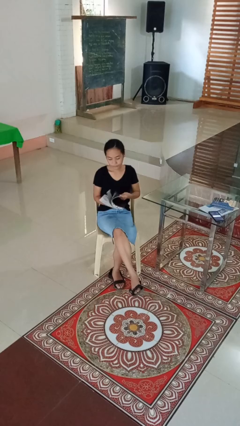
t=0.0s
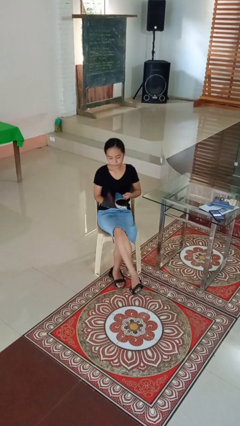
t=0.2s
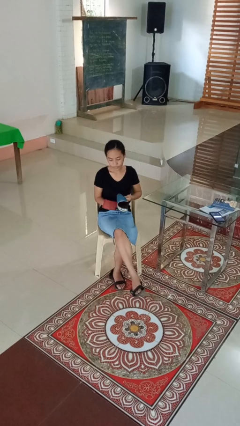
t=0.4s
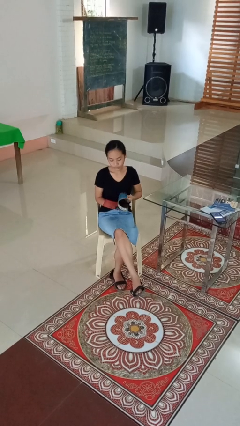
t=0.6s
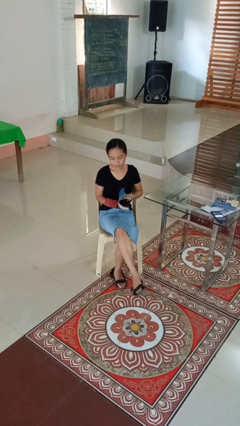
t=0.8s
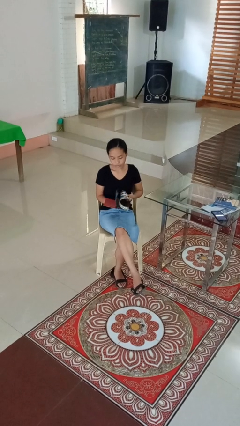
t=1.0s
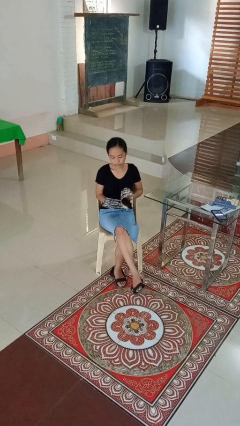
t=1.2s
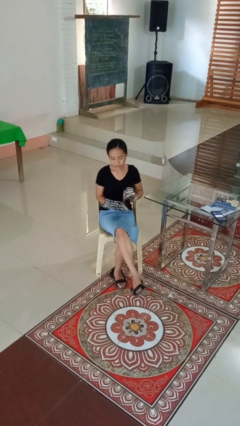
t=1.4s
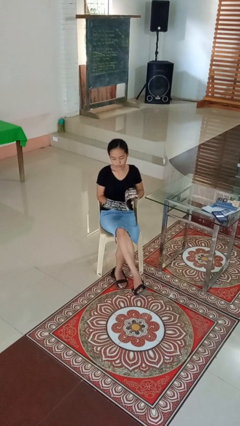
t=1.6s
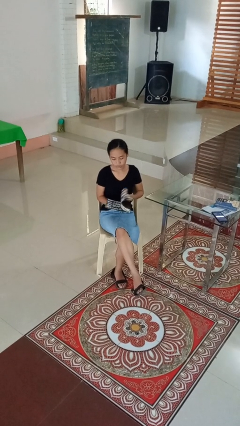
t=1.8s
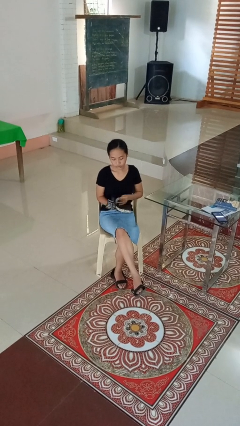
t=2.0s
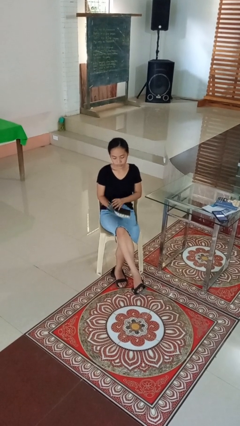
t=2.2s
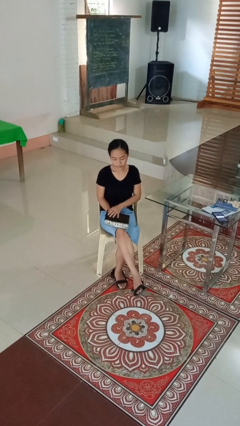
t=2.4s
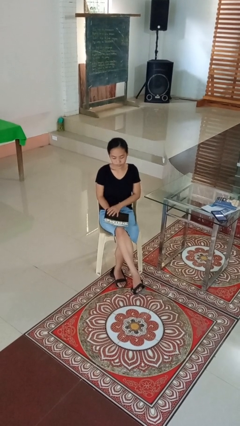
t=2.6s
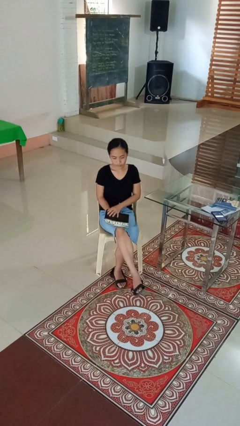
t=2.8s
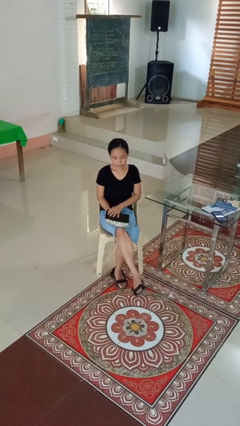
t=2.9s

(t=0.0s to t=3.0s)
person reads magazine

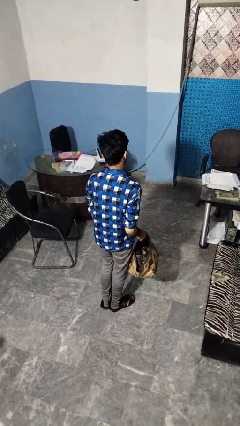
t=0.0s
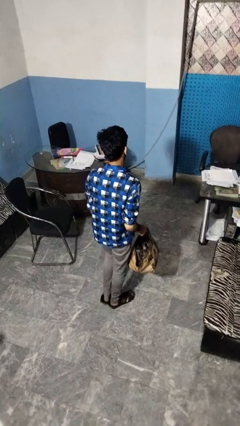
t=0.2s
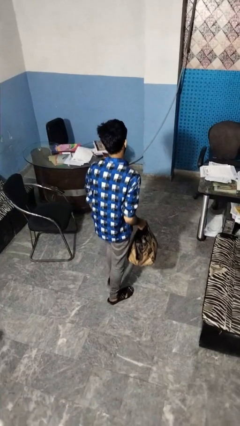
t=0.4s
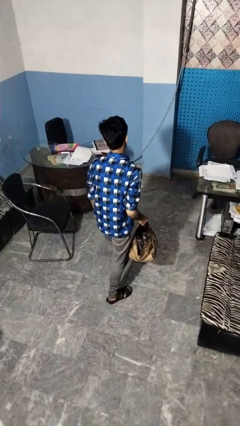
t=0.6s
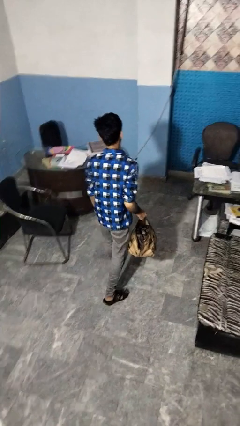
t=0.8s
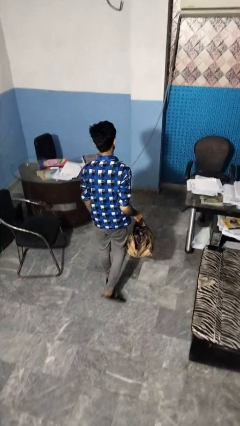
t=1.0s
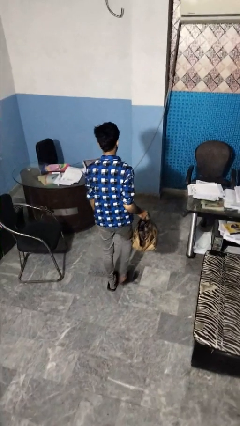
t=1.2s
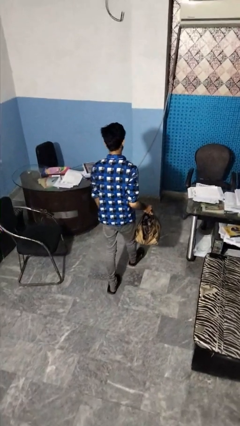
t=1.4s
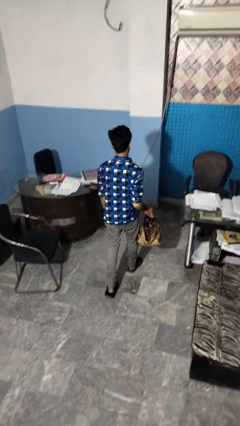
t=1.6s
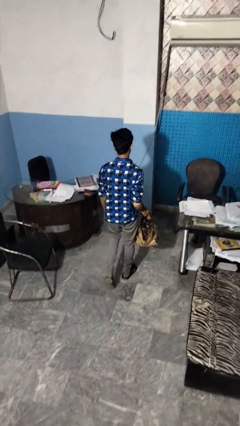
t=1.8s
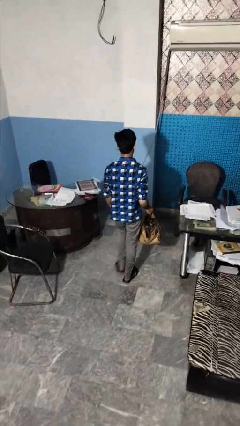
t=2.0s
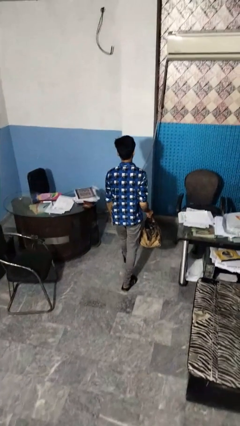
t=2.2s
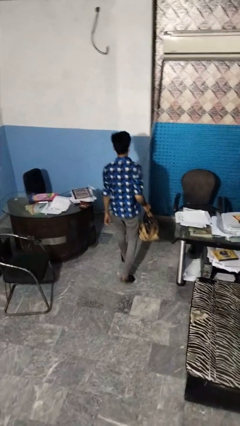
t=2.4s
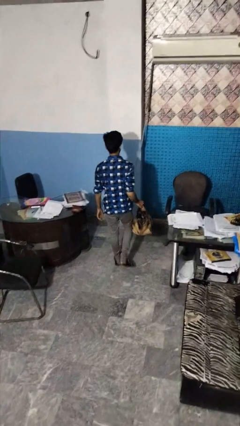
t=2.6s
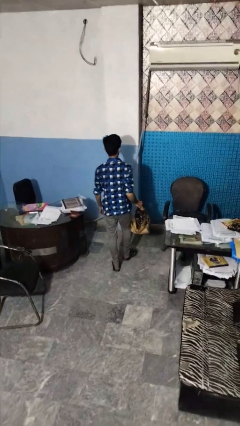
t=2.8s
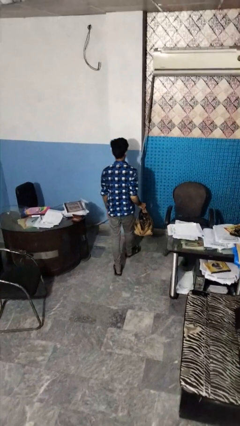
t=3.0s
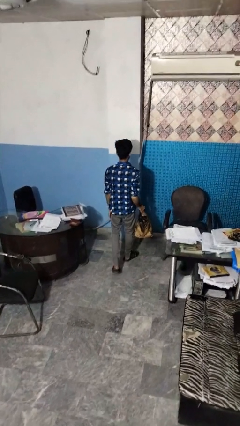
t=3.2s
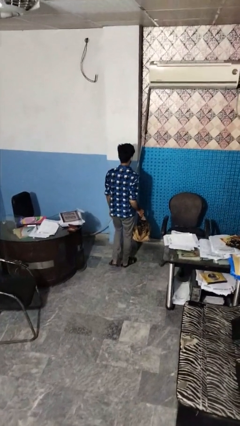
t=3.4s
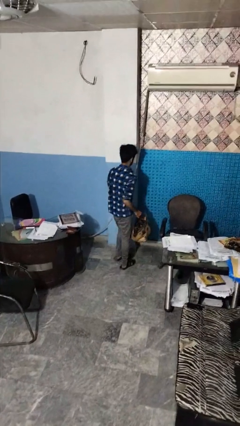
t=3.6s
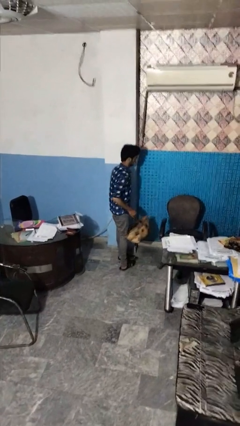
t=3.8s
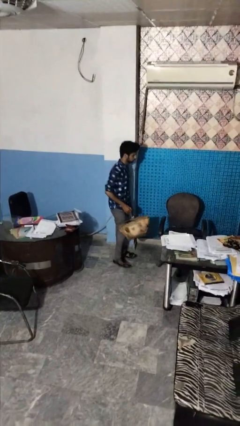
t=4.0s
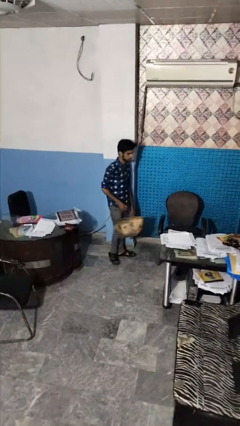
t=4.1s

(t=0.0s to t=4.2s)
person carries groceries

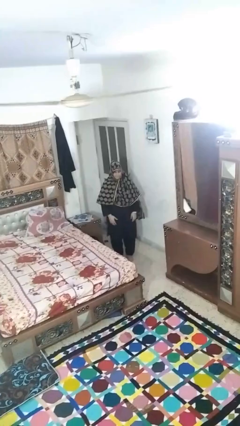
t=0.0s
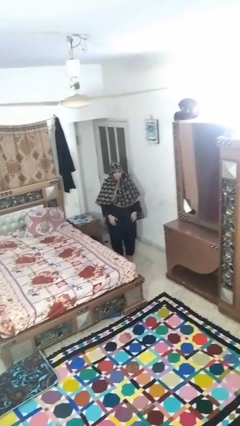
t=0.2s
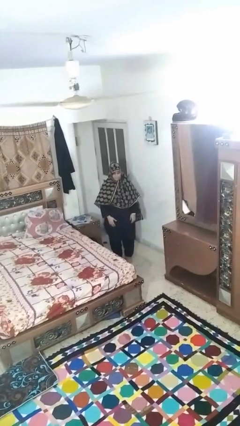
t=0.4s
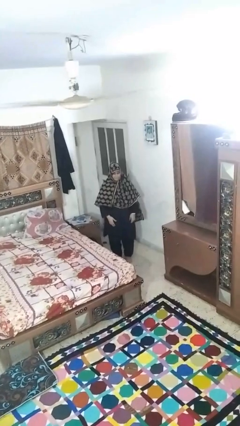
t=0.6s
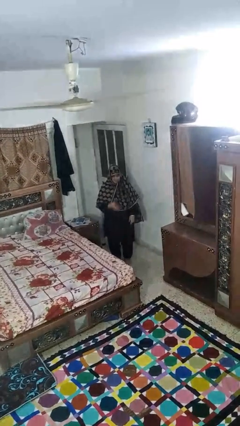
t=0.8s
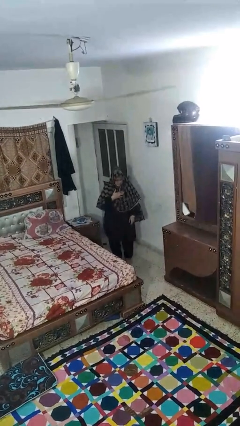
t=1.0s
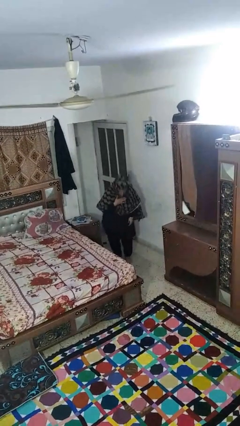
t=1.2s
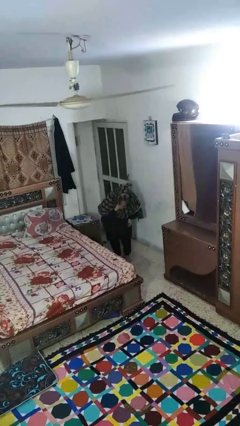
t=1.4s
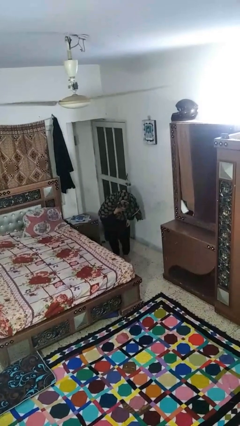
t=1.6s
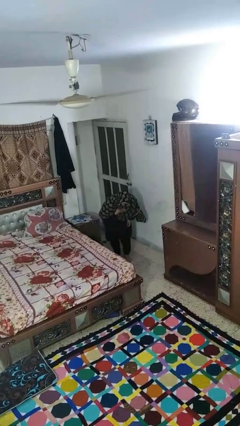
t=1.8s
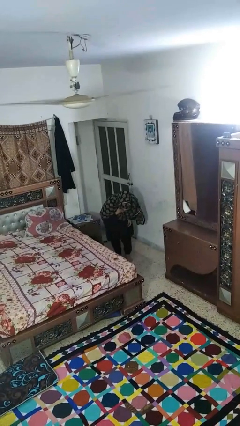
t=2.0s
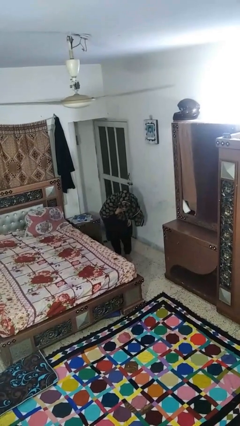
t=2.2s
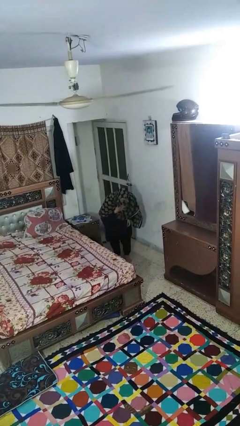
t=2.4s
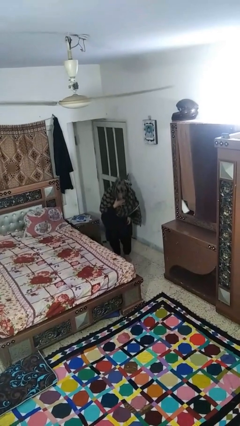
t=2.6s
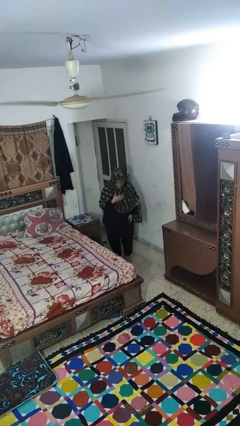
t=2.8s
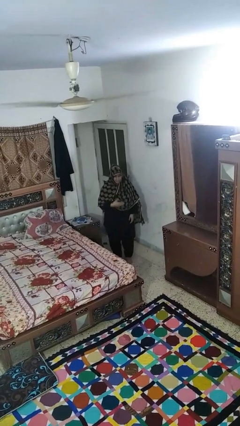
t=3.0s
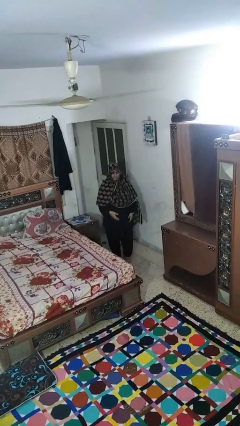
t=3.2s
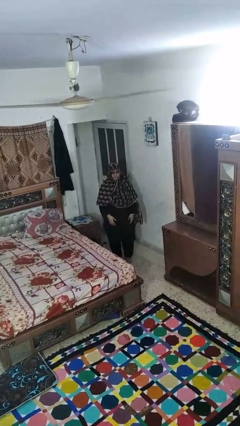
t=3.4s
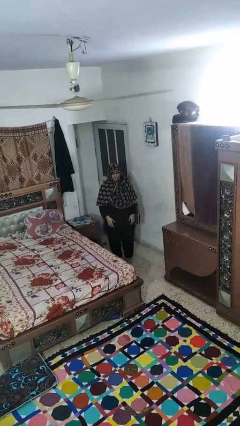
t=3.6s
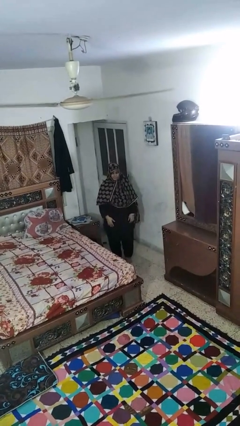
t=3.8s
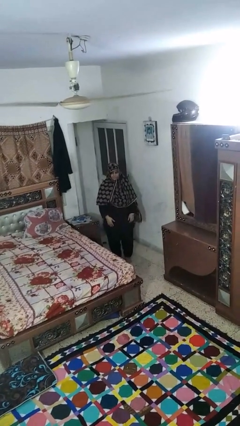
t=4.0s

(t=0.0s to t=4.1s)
person bows

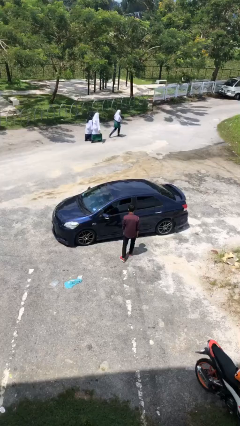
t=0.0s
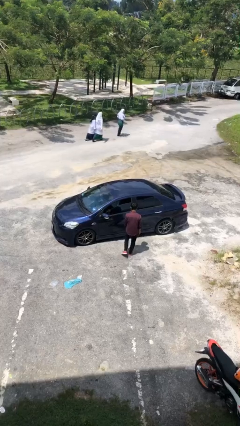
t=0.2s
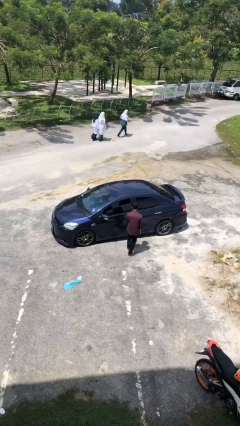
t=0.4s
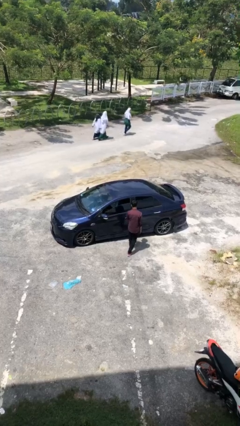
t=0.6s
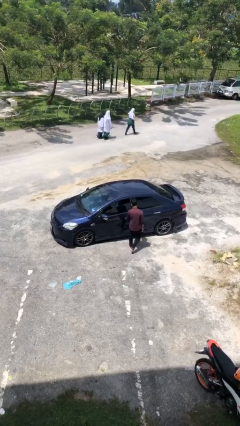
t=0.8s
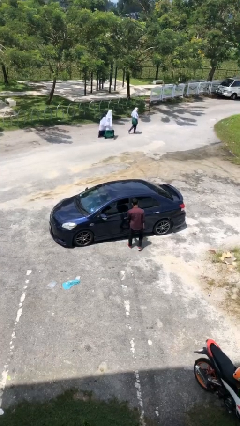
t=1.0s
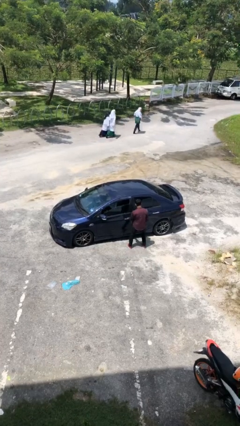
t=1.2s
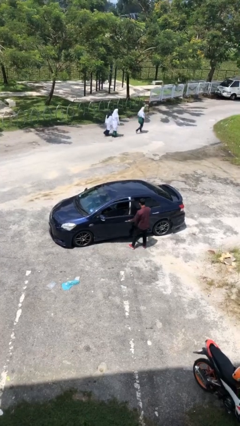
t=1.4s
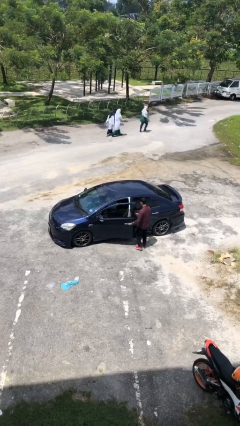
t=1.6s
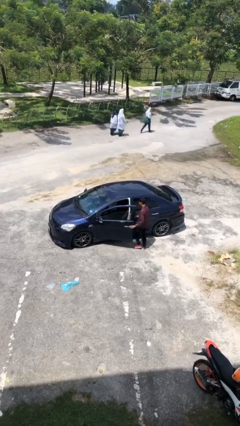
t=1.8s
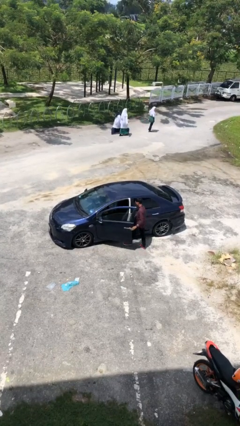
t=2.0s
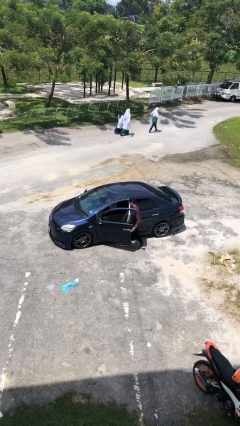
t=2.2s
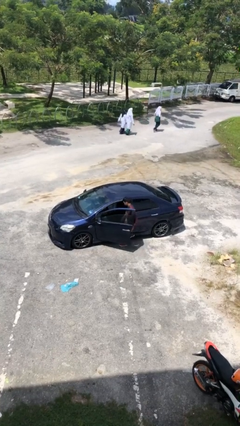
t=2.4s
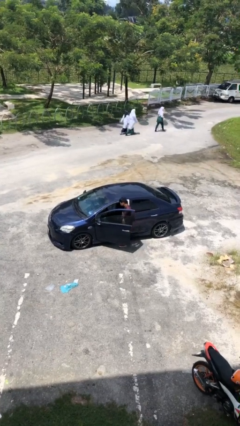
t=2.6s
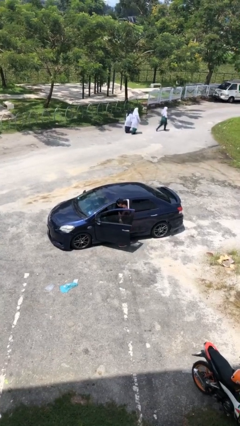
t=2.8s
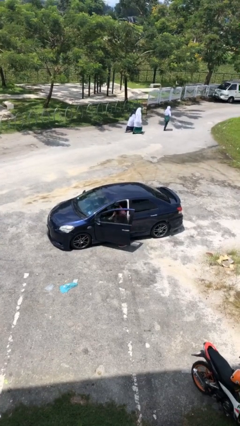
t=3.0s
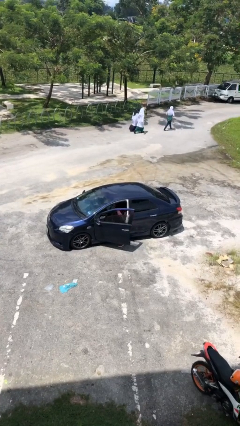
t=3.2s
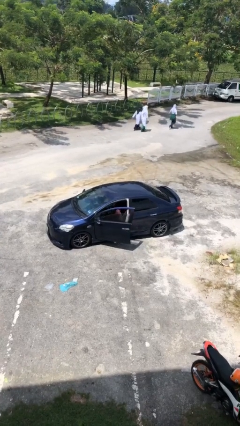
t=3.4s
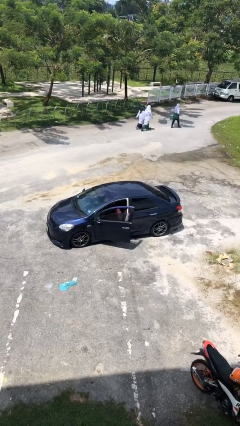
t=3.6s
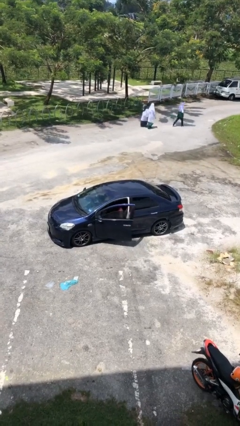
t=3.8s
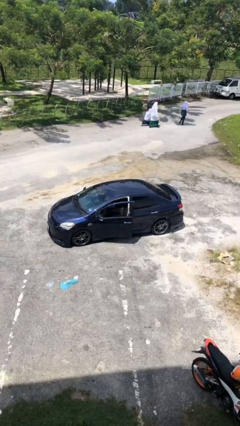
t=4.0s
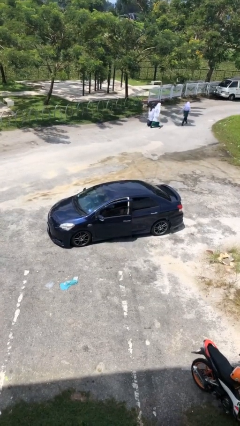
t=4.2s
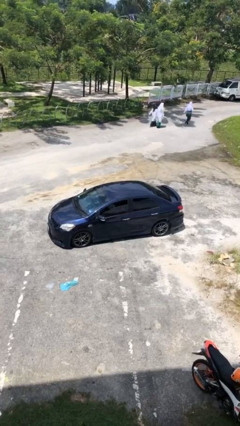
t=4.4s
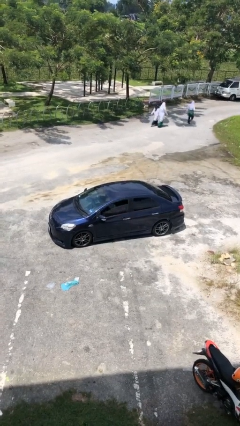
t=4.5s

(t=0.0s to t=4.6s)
car picks up person

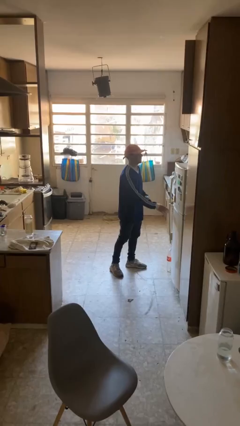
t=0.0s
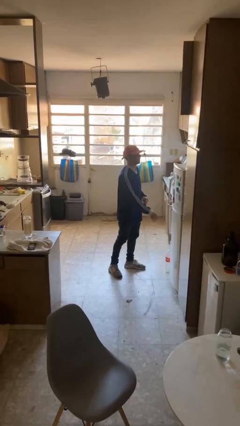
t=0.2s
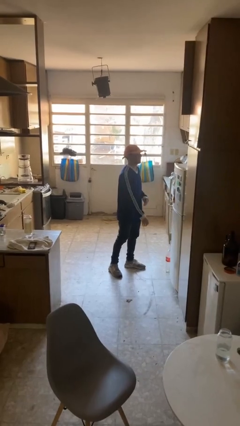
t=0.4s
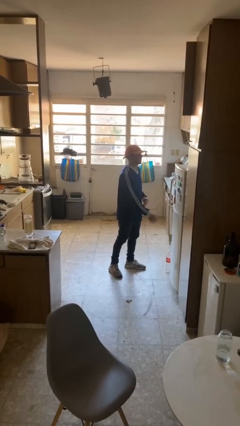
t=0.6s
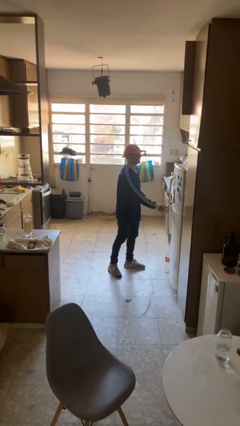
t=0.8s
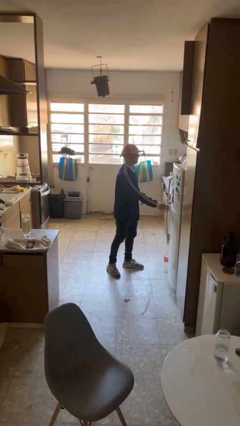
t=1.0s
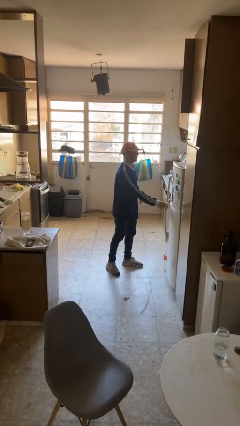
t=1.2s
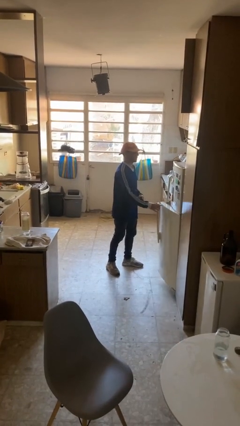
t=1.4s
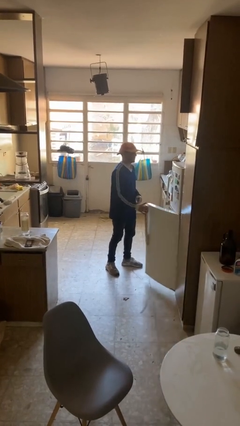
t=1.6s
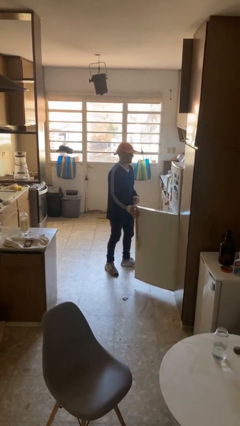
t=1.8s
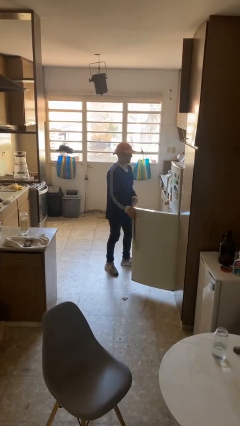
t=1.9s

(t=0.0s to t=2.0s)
person opens refrigerator
